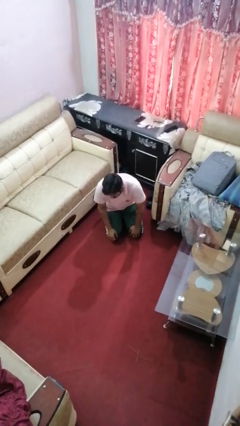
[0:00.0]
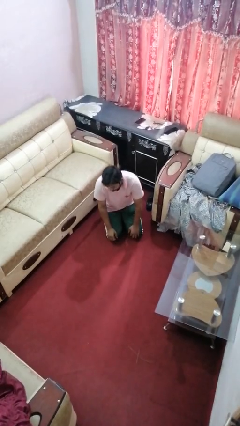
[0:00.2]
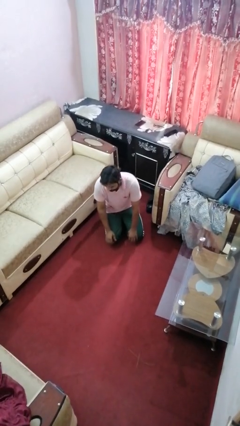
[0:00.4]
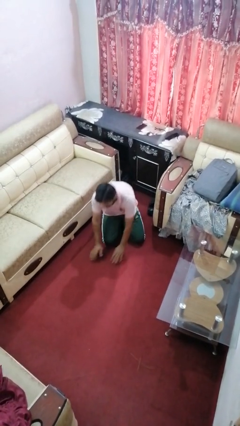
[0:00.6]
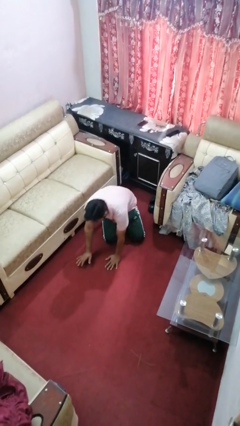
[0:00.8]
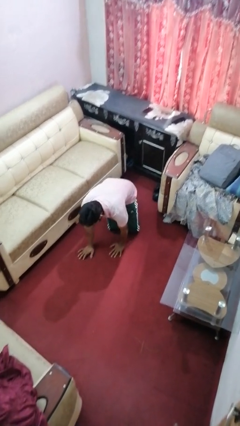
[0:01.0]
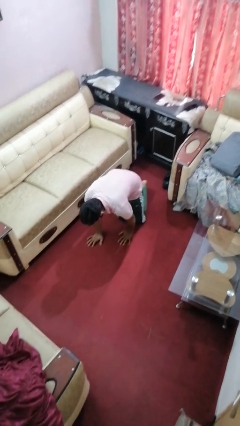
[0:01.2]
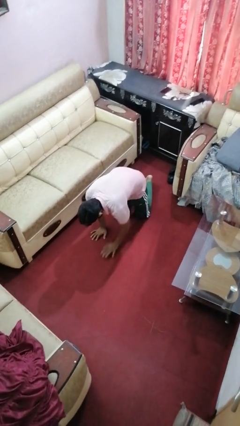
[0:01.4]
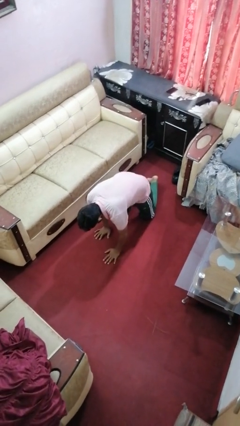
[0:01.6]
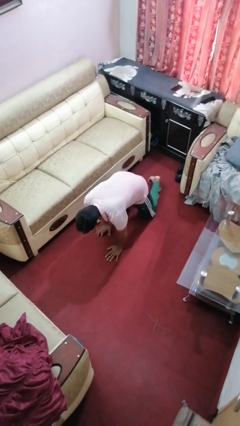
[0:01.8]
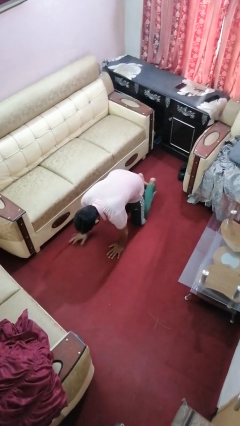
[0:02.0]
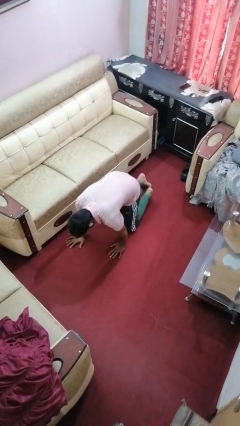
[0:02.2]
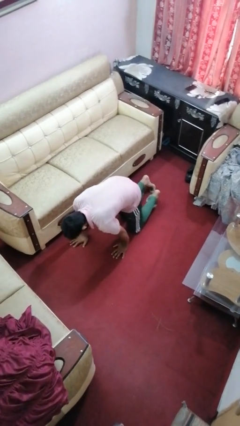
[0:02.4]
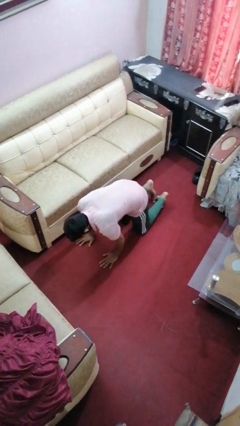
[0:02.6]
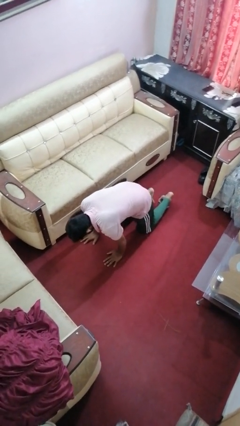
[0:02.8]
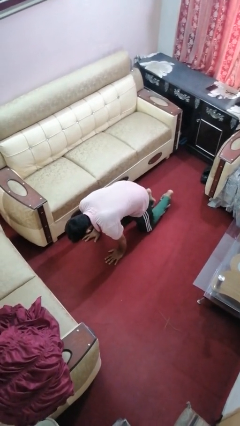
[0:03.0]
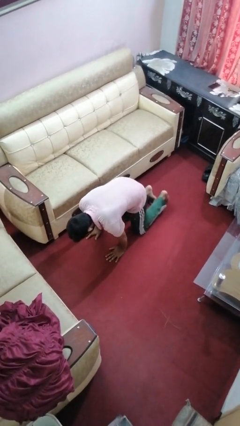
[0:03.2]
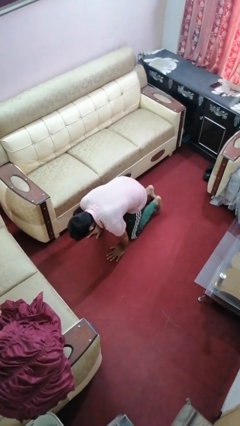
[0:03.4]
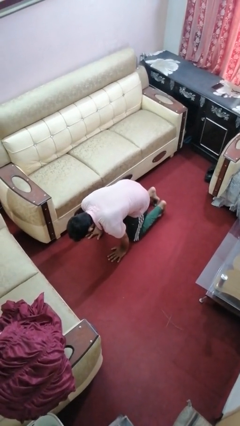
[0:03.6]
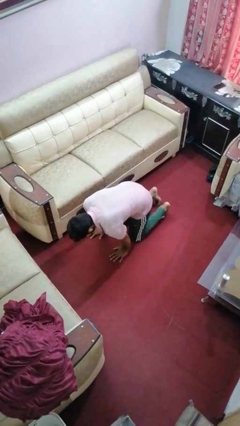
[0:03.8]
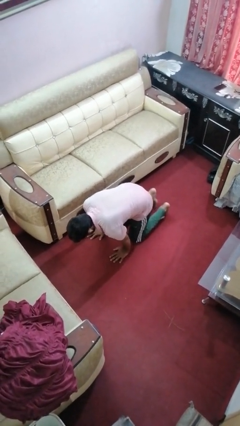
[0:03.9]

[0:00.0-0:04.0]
person crawls

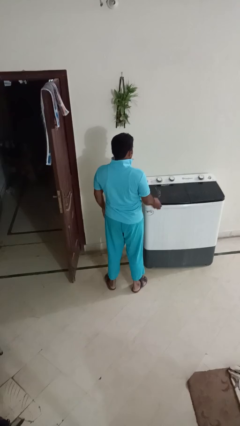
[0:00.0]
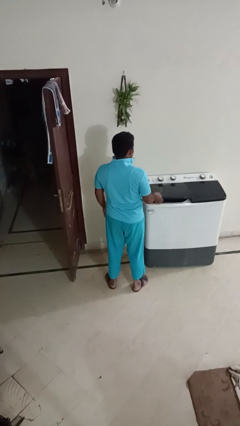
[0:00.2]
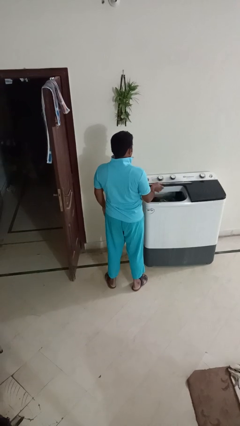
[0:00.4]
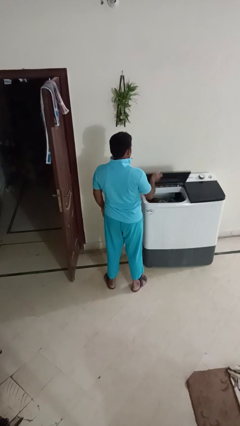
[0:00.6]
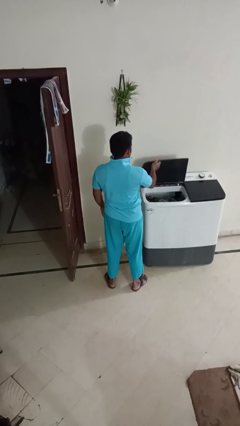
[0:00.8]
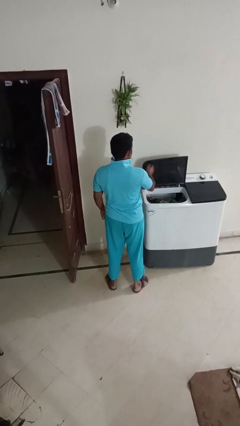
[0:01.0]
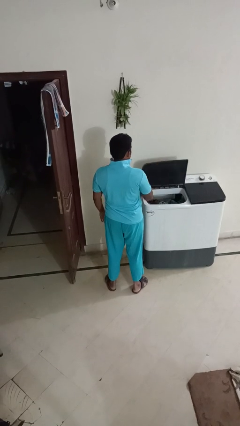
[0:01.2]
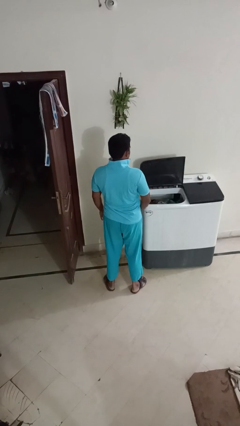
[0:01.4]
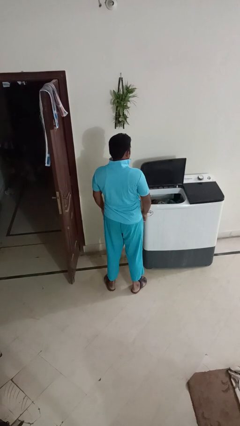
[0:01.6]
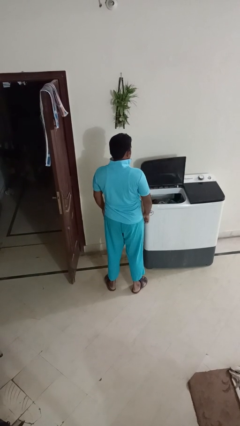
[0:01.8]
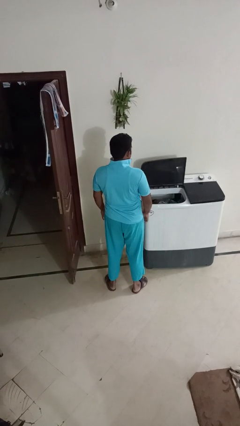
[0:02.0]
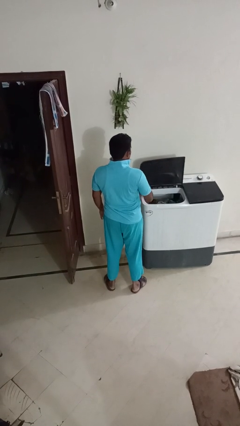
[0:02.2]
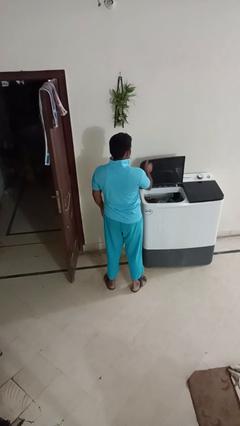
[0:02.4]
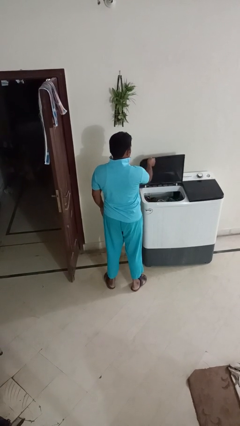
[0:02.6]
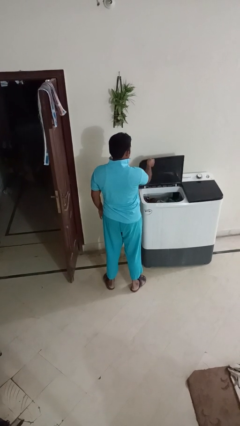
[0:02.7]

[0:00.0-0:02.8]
person opens clothes washer

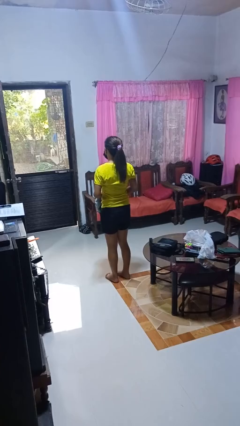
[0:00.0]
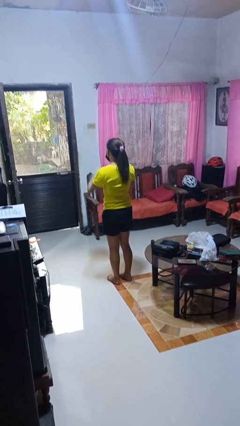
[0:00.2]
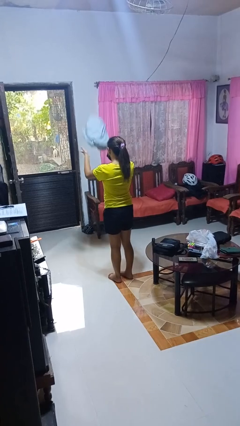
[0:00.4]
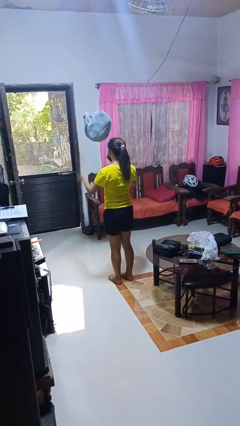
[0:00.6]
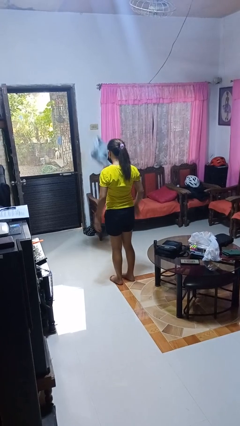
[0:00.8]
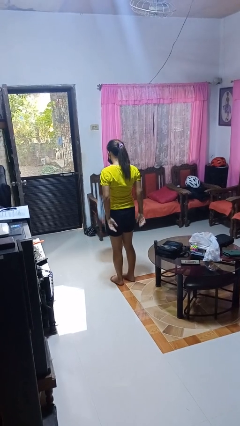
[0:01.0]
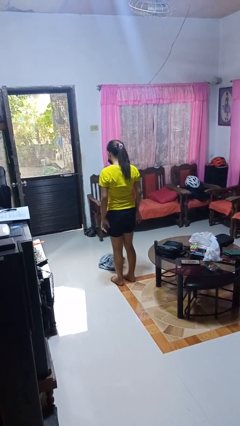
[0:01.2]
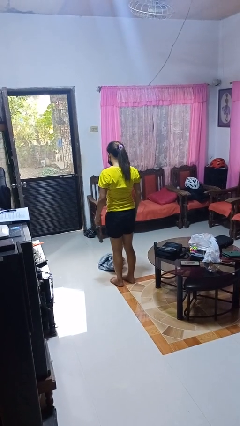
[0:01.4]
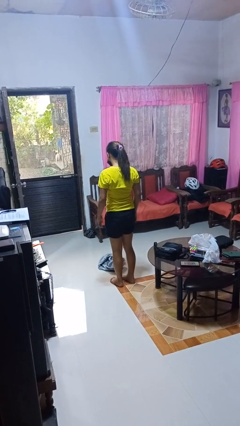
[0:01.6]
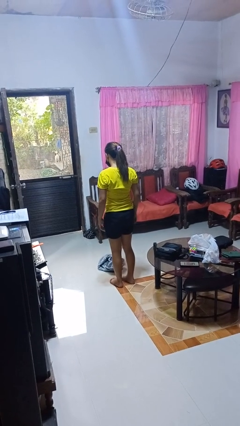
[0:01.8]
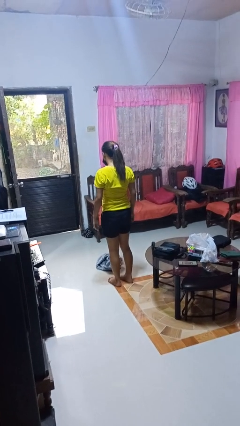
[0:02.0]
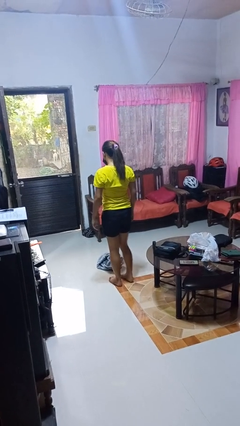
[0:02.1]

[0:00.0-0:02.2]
person throws object into air

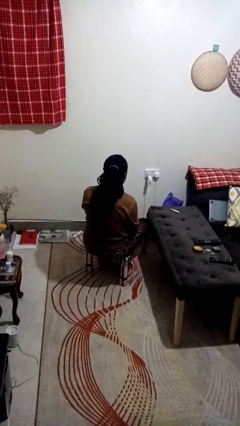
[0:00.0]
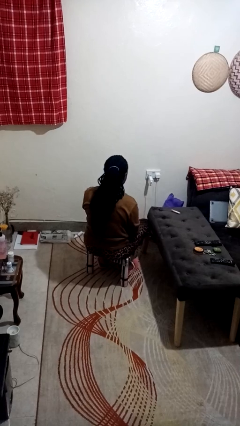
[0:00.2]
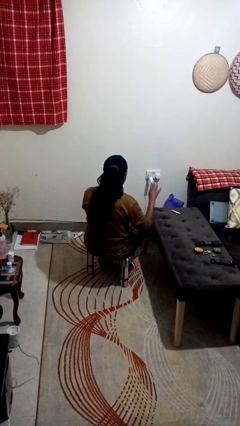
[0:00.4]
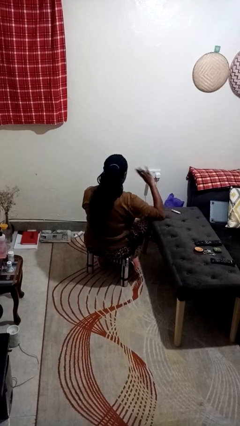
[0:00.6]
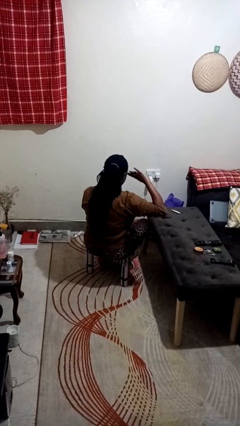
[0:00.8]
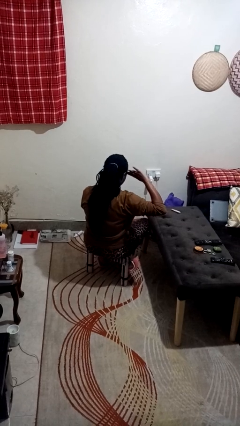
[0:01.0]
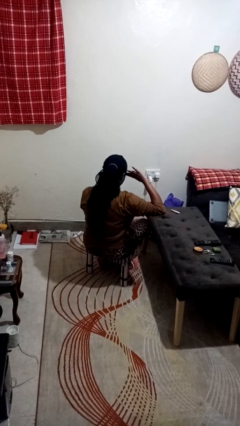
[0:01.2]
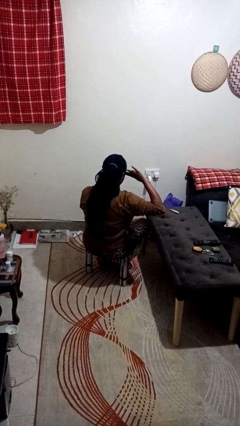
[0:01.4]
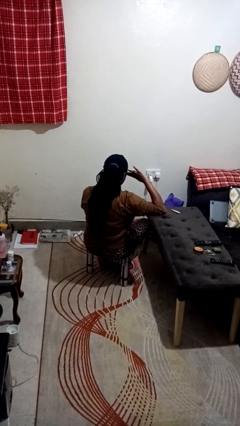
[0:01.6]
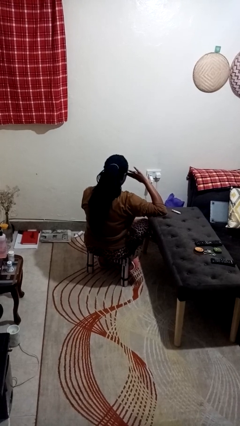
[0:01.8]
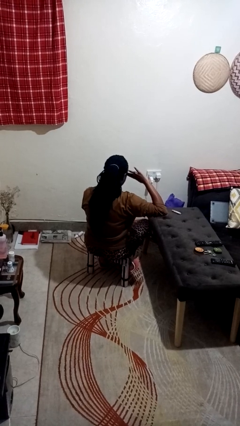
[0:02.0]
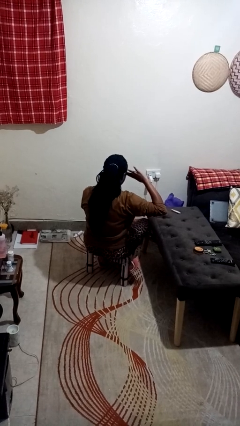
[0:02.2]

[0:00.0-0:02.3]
person salutes

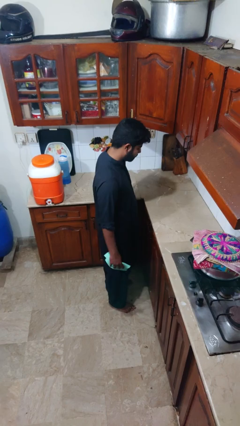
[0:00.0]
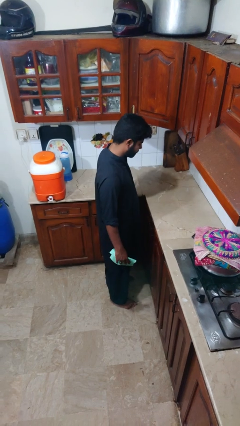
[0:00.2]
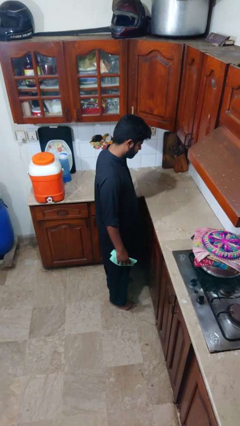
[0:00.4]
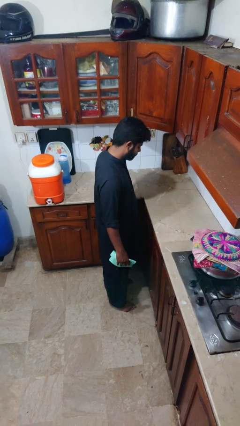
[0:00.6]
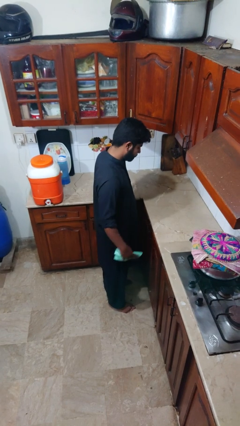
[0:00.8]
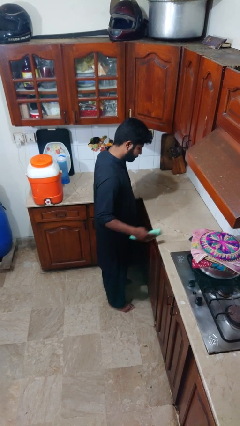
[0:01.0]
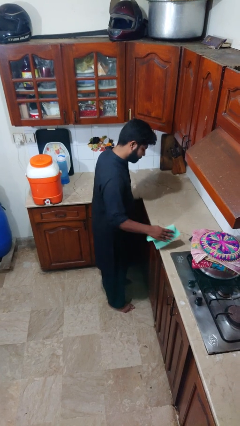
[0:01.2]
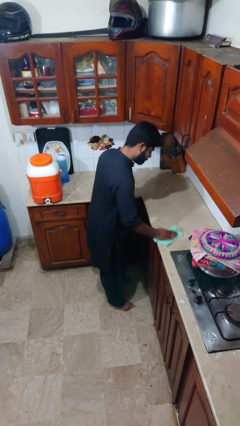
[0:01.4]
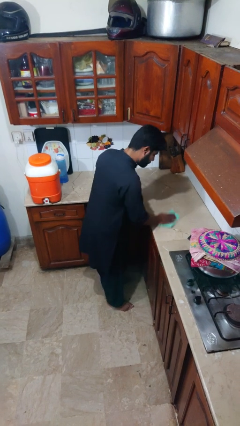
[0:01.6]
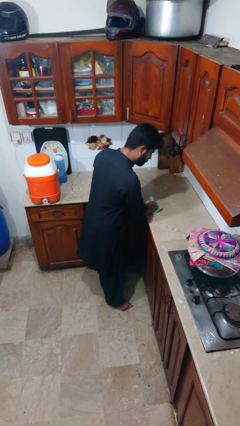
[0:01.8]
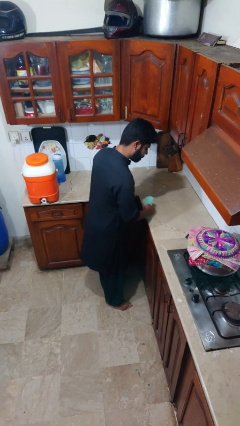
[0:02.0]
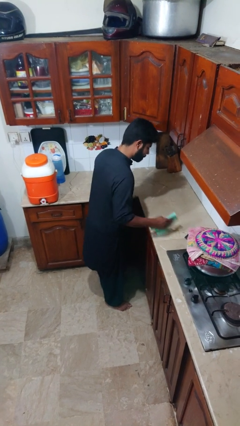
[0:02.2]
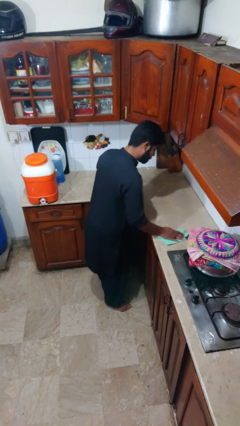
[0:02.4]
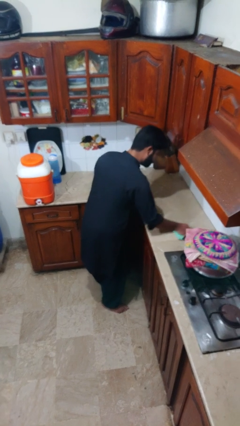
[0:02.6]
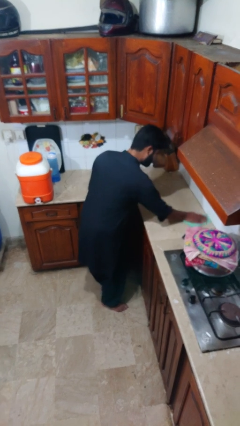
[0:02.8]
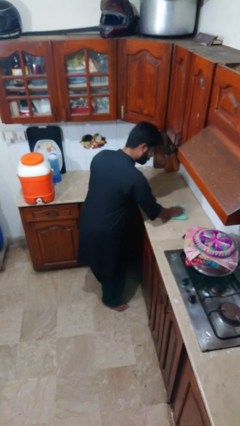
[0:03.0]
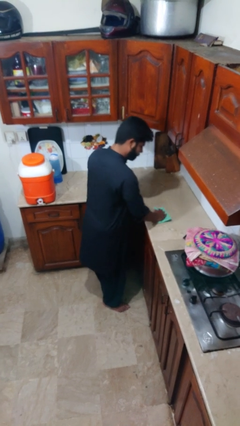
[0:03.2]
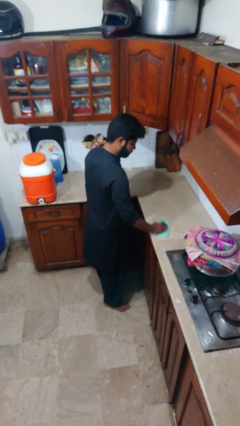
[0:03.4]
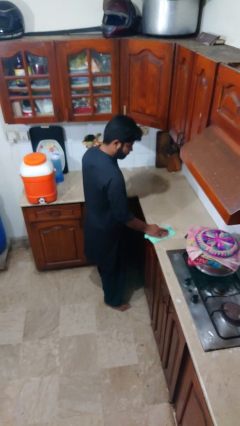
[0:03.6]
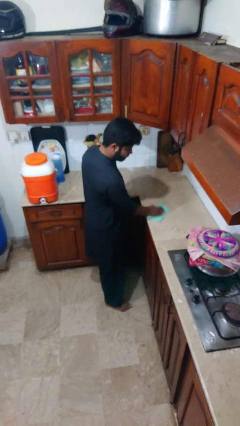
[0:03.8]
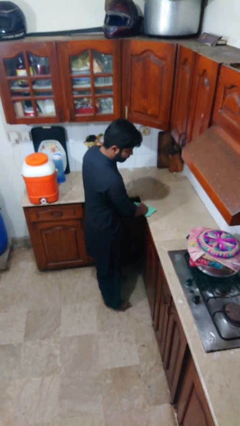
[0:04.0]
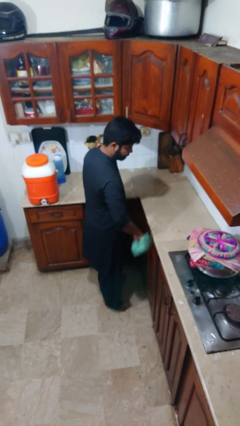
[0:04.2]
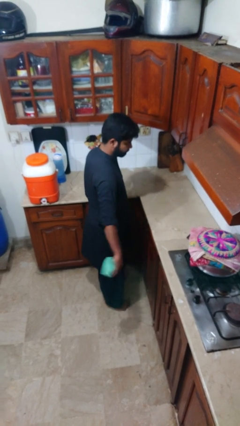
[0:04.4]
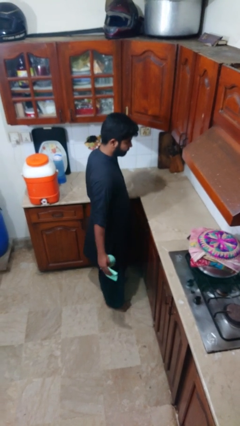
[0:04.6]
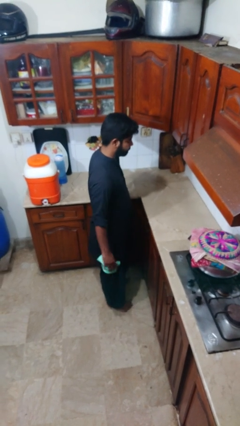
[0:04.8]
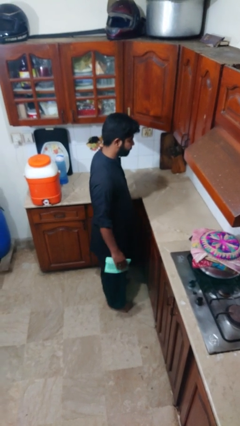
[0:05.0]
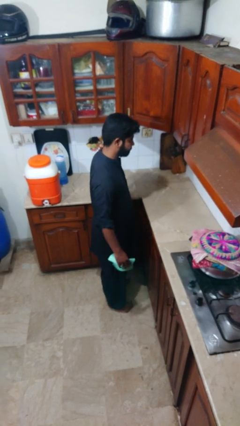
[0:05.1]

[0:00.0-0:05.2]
person cleans table with rag

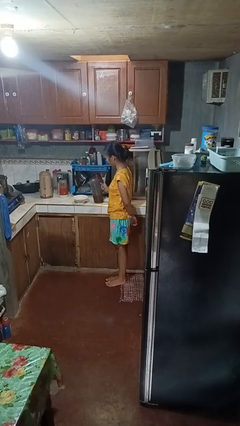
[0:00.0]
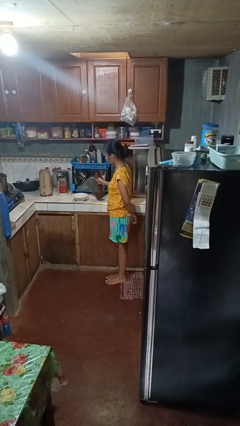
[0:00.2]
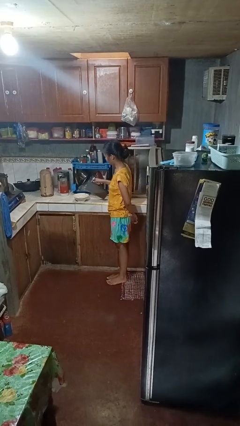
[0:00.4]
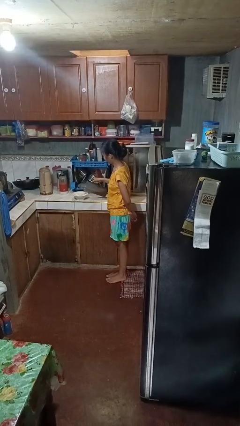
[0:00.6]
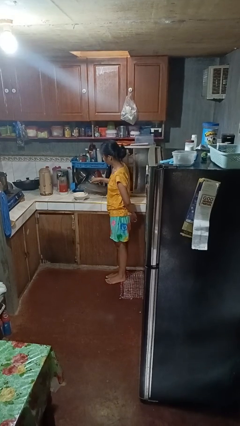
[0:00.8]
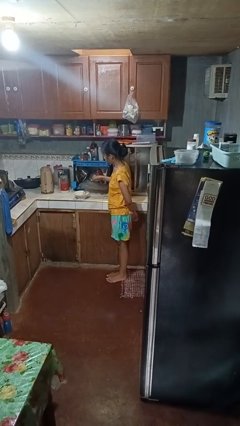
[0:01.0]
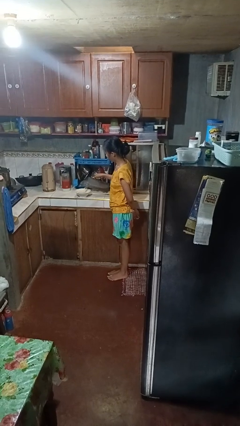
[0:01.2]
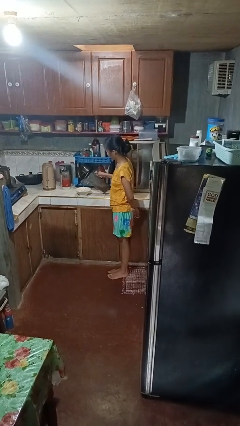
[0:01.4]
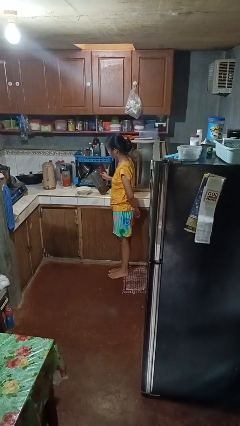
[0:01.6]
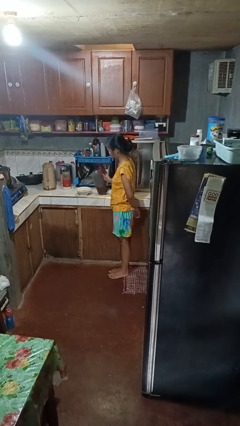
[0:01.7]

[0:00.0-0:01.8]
person pours into bowl
